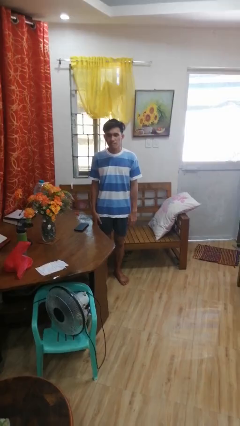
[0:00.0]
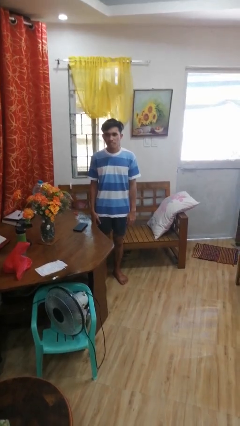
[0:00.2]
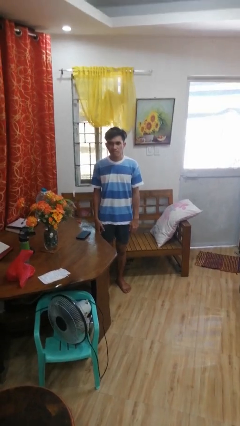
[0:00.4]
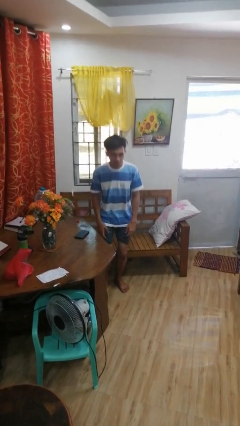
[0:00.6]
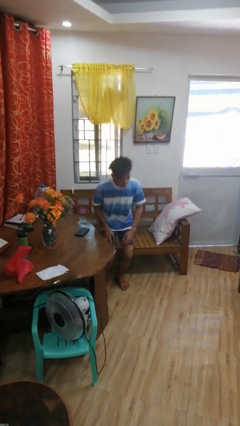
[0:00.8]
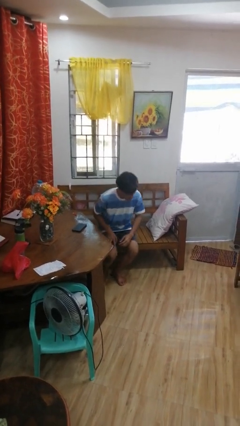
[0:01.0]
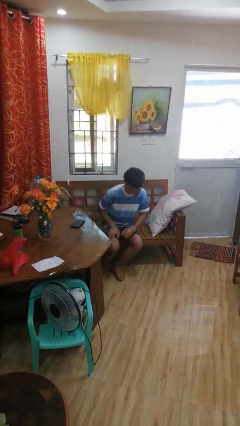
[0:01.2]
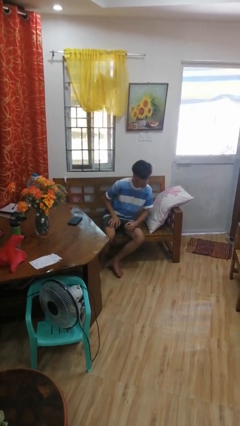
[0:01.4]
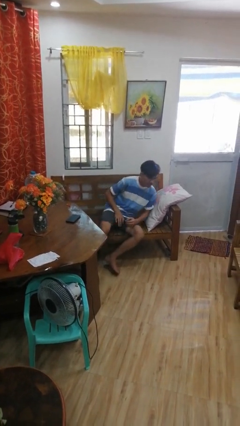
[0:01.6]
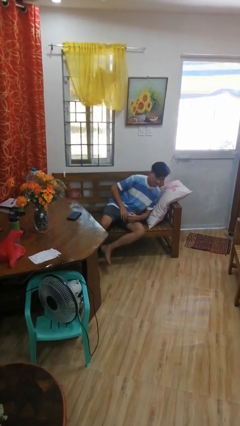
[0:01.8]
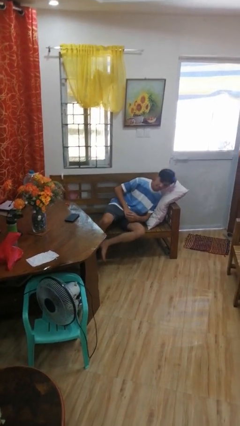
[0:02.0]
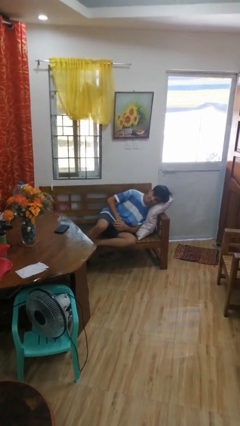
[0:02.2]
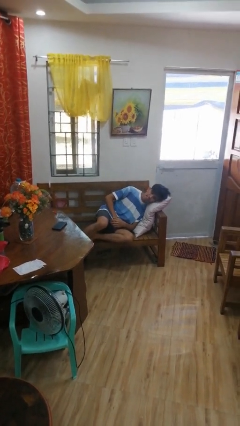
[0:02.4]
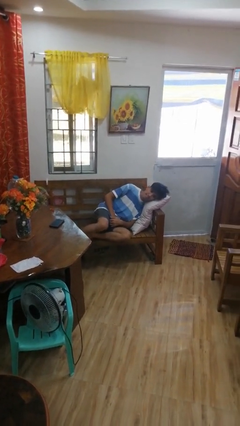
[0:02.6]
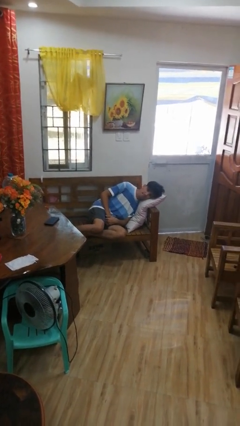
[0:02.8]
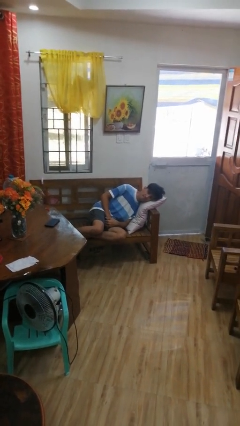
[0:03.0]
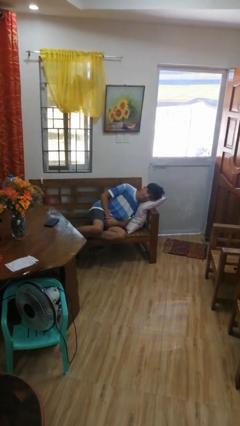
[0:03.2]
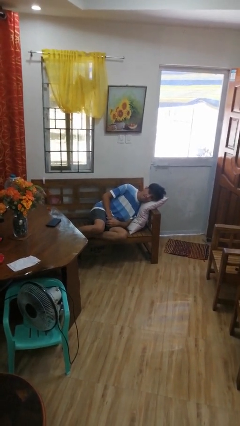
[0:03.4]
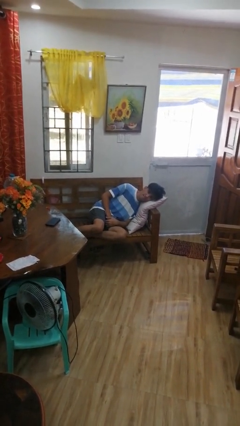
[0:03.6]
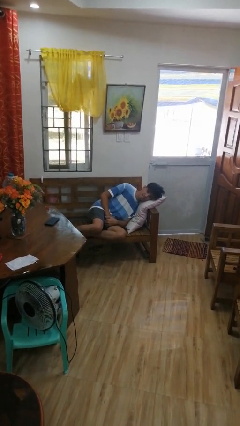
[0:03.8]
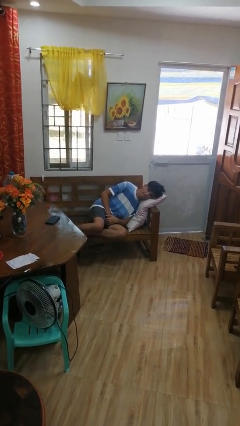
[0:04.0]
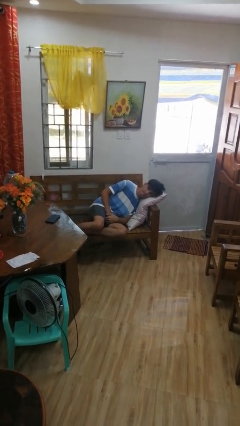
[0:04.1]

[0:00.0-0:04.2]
person lies down on couch

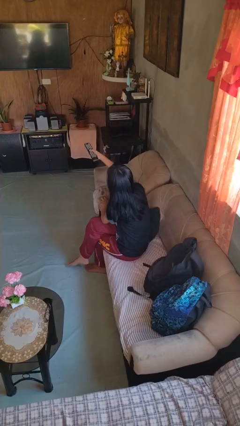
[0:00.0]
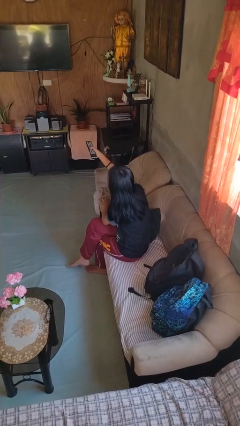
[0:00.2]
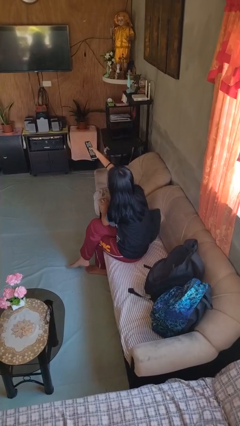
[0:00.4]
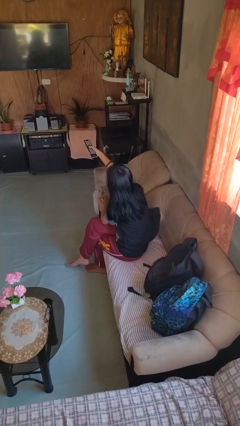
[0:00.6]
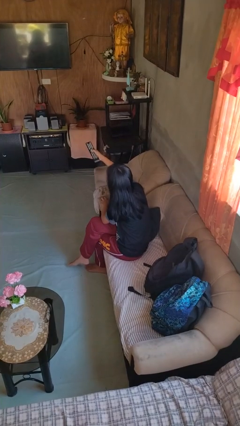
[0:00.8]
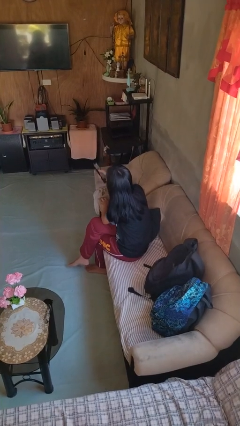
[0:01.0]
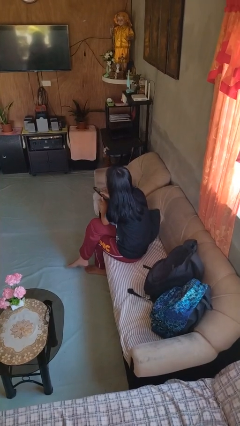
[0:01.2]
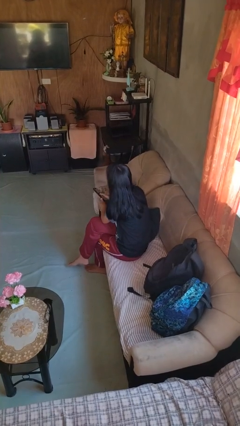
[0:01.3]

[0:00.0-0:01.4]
person uses television remote

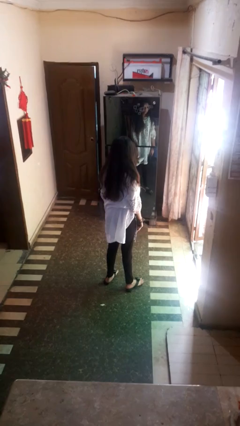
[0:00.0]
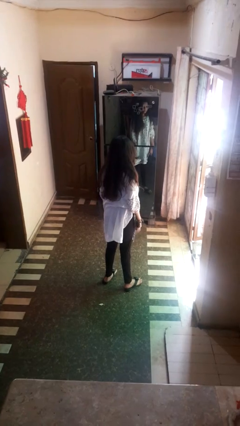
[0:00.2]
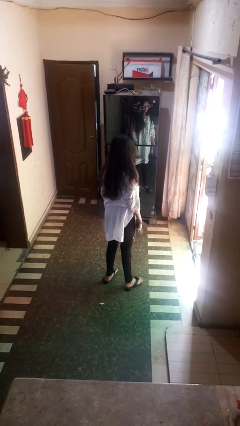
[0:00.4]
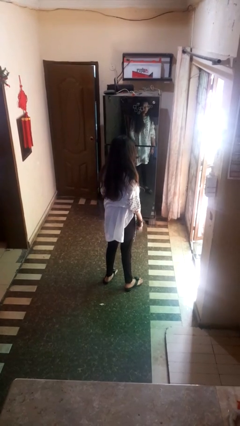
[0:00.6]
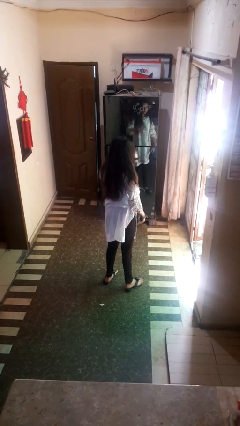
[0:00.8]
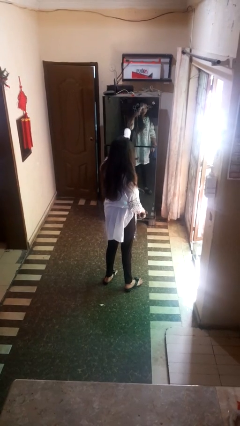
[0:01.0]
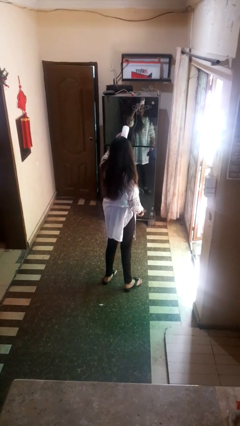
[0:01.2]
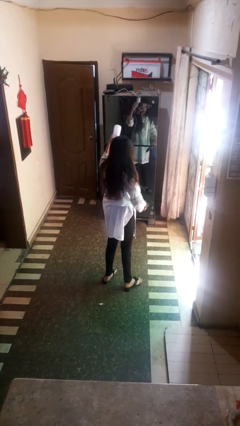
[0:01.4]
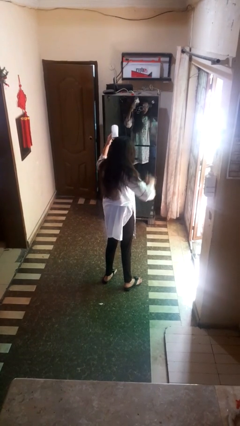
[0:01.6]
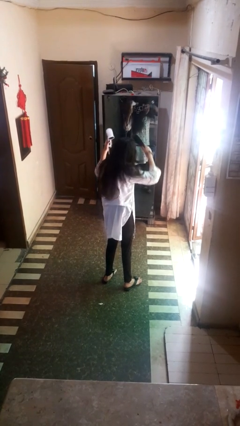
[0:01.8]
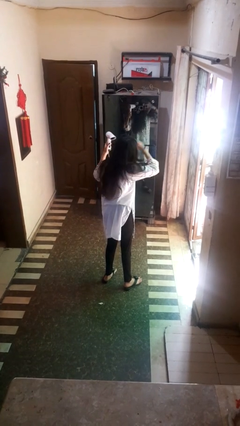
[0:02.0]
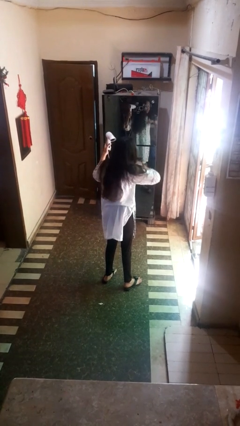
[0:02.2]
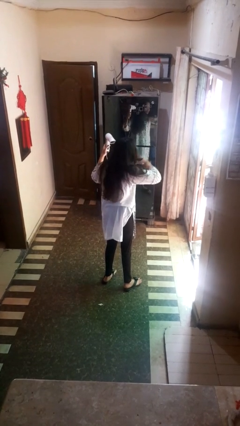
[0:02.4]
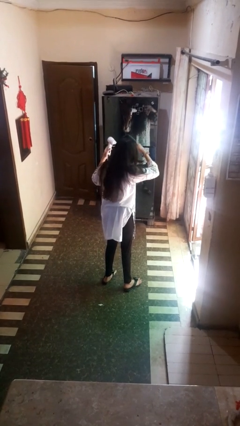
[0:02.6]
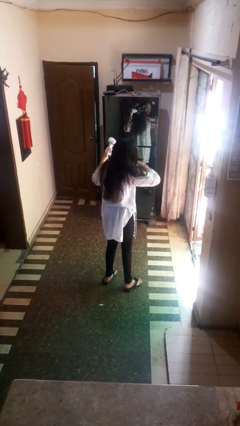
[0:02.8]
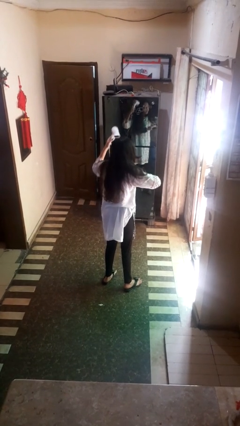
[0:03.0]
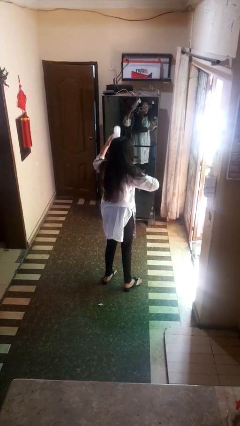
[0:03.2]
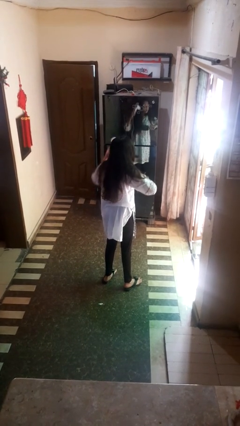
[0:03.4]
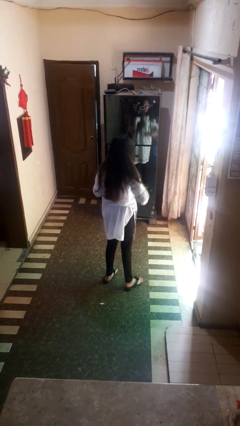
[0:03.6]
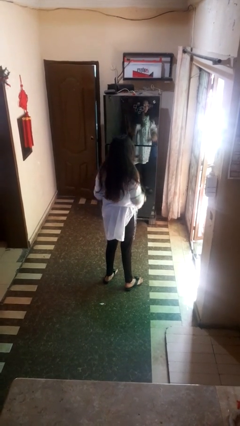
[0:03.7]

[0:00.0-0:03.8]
person dries hair with hairdryer

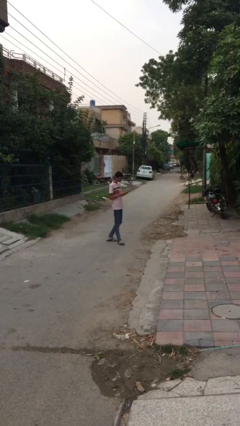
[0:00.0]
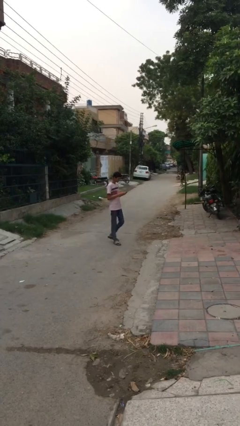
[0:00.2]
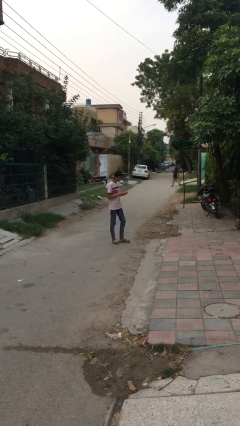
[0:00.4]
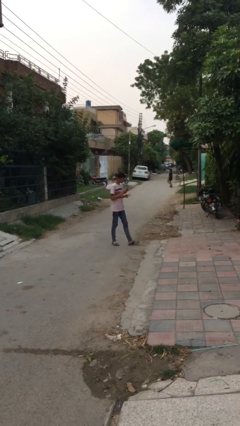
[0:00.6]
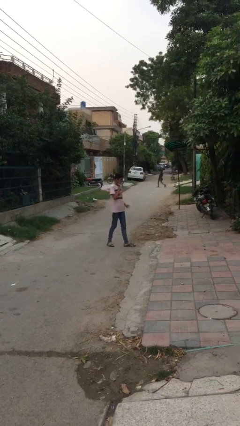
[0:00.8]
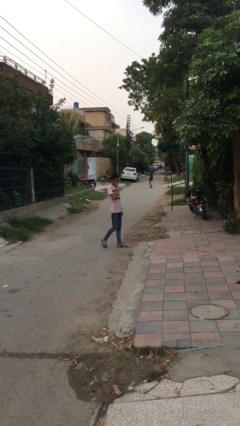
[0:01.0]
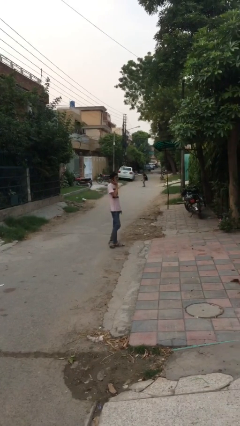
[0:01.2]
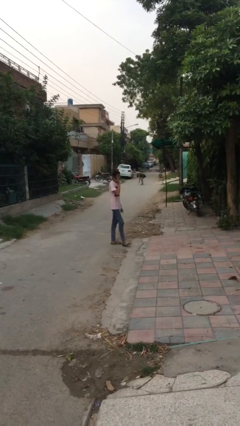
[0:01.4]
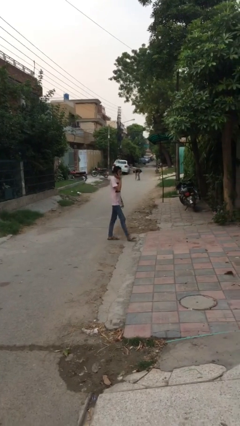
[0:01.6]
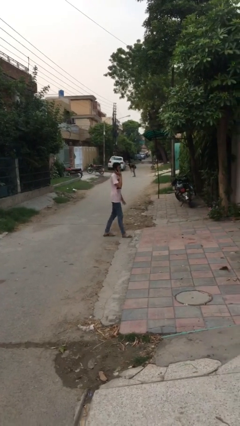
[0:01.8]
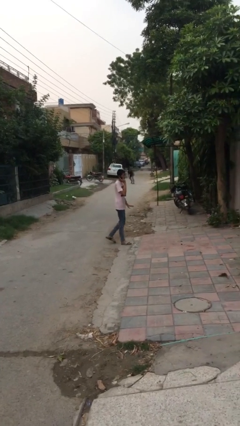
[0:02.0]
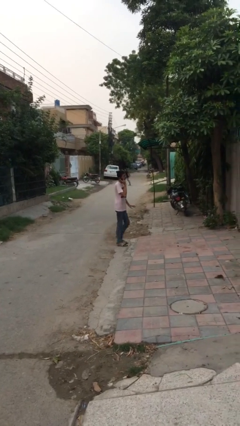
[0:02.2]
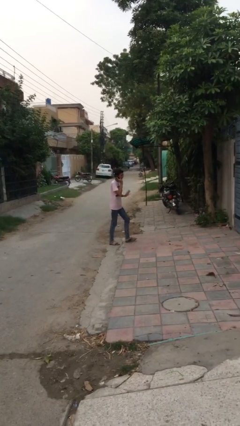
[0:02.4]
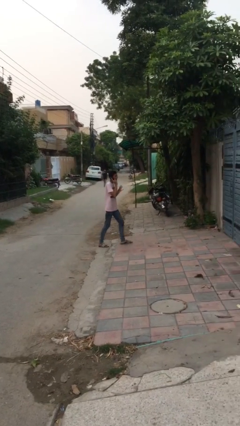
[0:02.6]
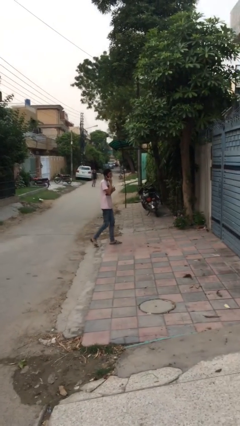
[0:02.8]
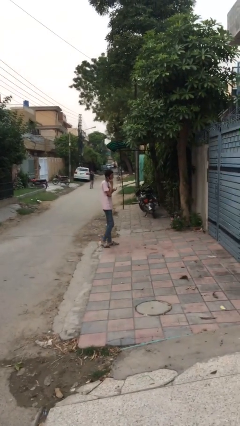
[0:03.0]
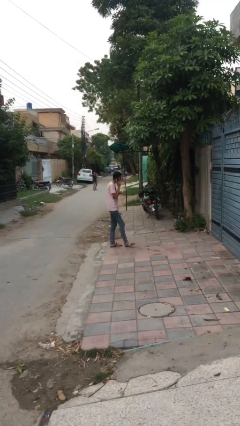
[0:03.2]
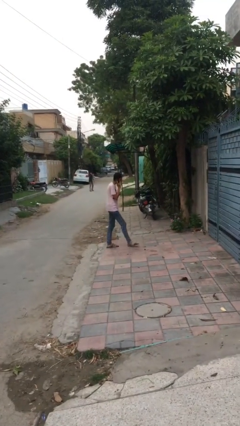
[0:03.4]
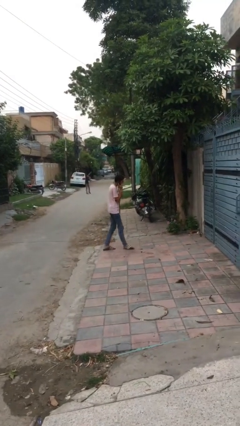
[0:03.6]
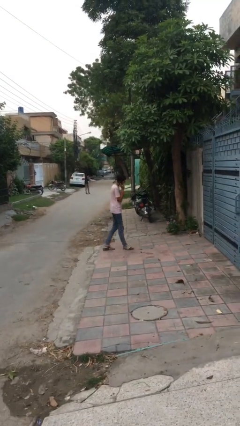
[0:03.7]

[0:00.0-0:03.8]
person talks on phone

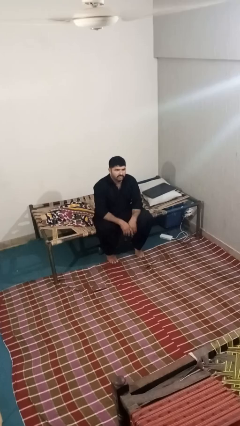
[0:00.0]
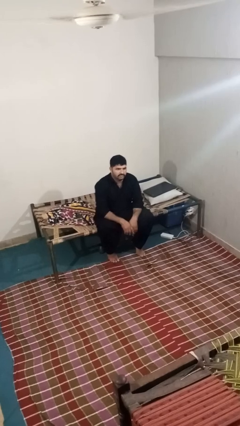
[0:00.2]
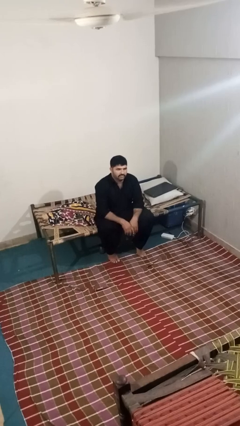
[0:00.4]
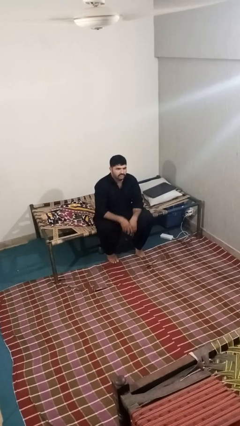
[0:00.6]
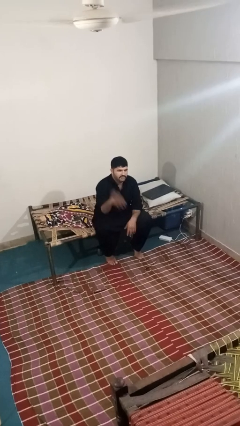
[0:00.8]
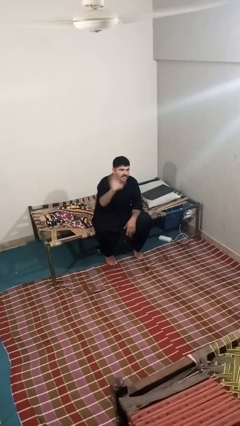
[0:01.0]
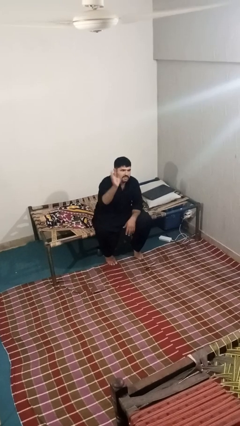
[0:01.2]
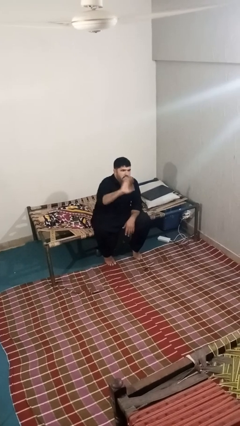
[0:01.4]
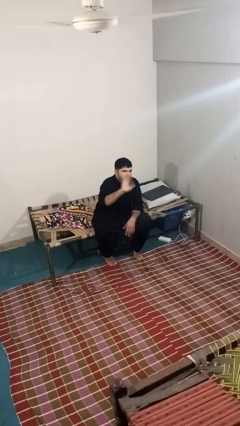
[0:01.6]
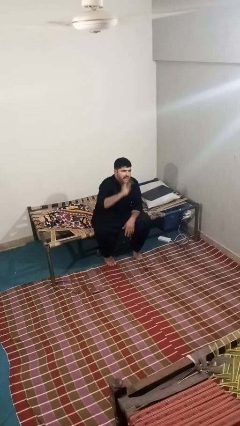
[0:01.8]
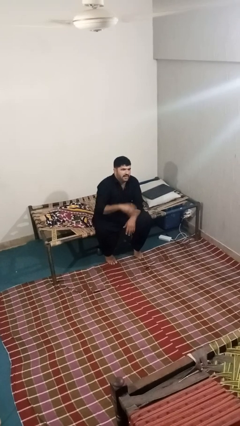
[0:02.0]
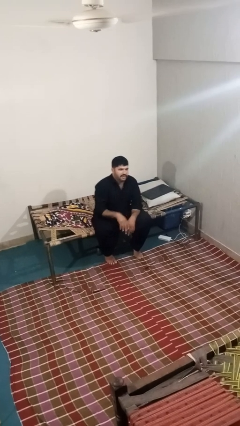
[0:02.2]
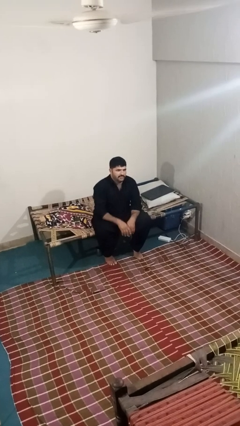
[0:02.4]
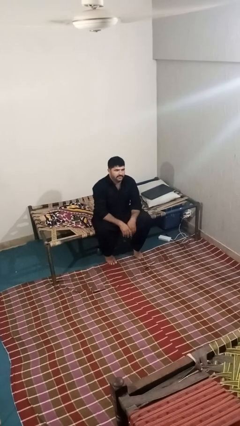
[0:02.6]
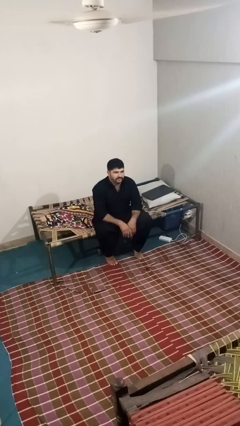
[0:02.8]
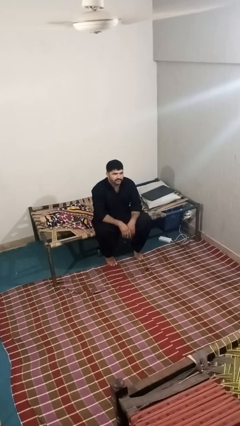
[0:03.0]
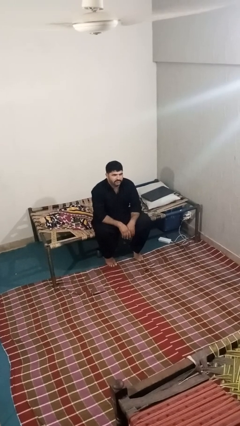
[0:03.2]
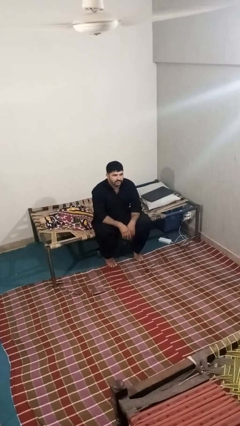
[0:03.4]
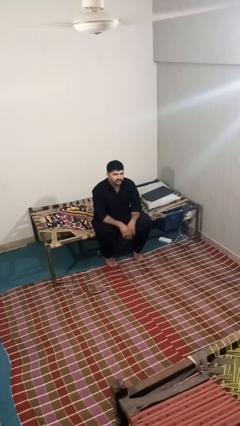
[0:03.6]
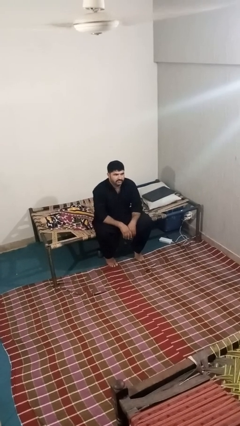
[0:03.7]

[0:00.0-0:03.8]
person waves at person

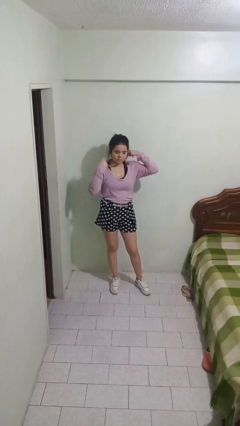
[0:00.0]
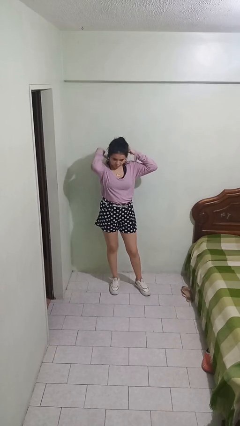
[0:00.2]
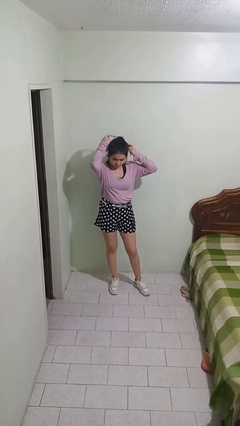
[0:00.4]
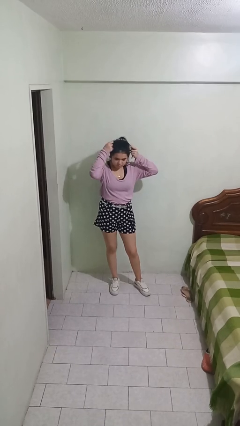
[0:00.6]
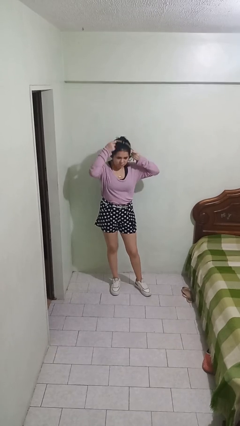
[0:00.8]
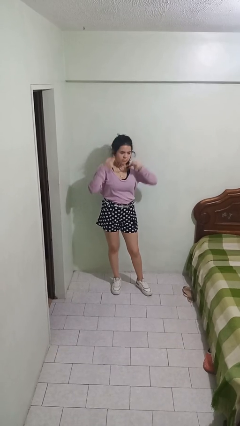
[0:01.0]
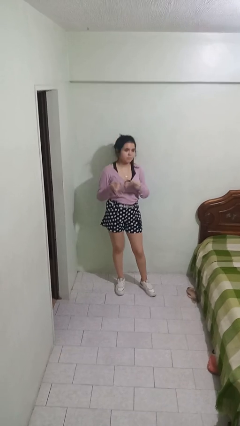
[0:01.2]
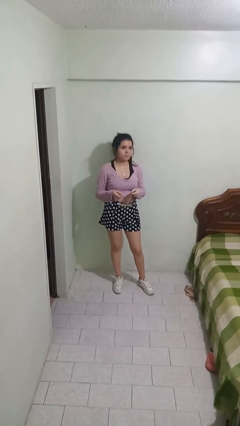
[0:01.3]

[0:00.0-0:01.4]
person takes off necklace
